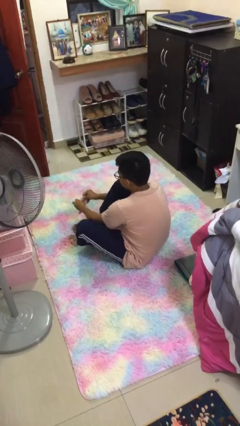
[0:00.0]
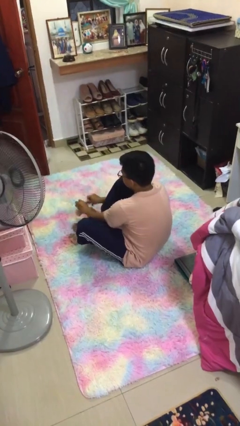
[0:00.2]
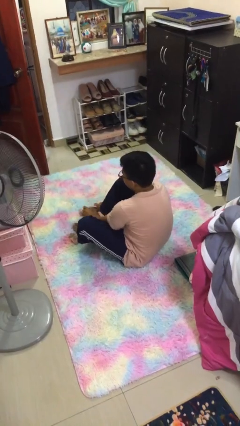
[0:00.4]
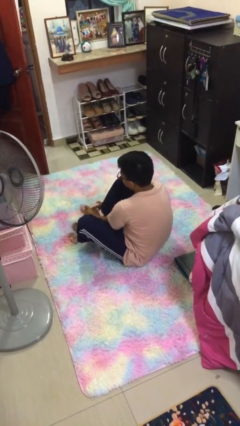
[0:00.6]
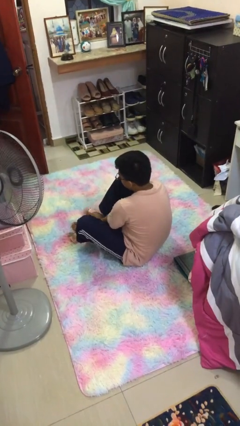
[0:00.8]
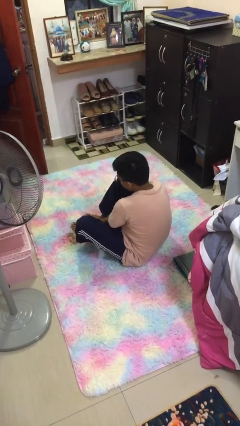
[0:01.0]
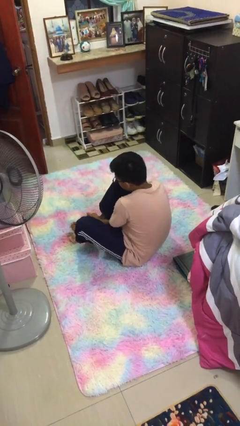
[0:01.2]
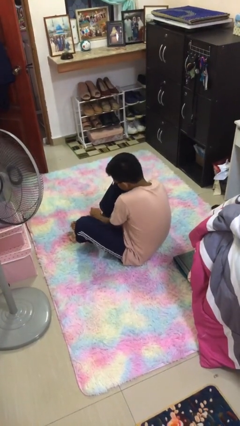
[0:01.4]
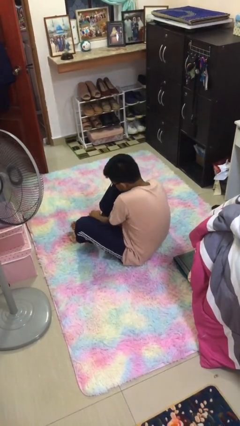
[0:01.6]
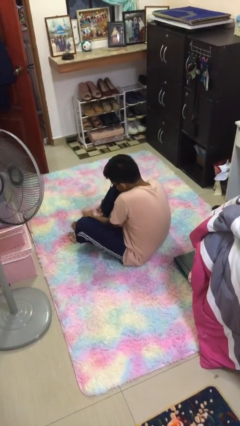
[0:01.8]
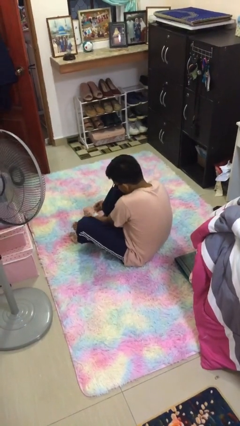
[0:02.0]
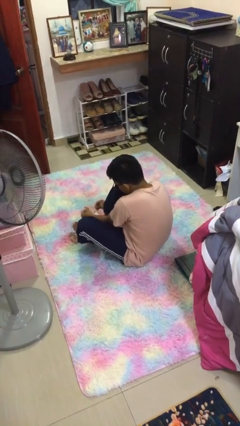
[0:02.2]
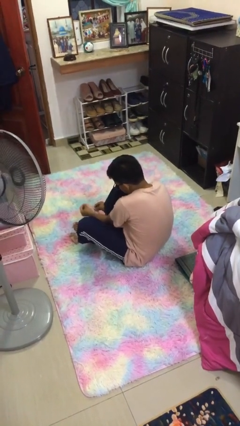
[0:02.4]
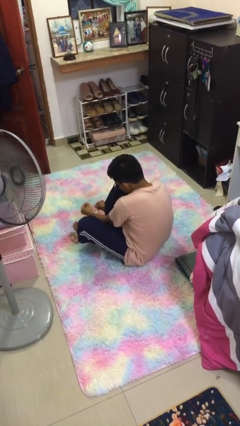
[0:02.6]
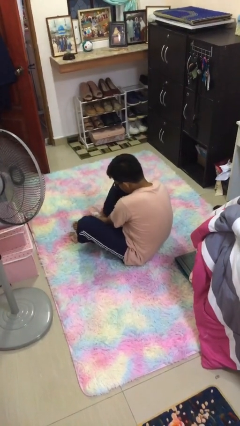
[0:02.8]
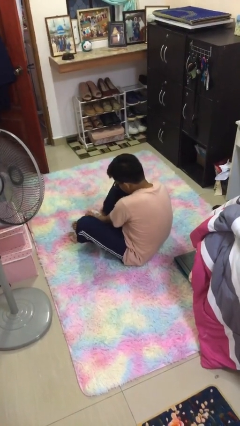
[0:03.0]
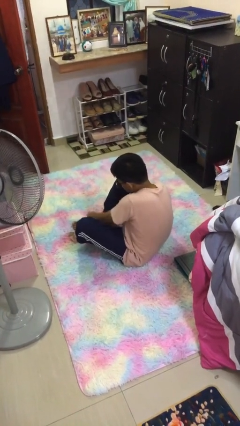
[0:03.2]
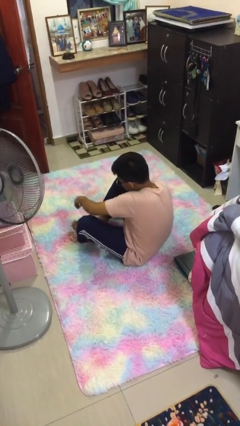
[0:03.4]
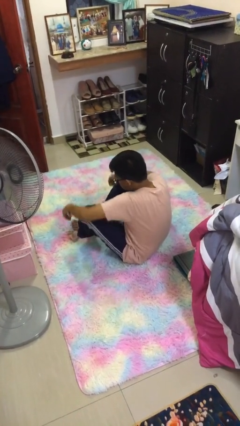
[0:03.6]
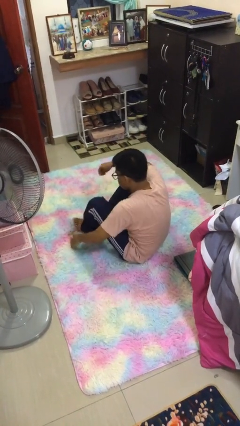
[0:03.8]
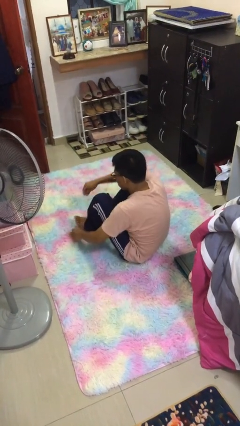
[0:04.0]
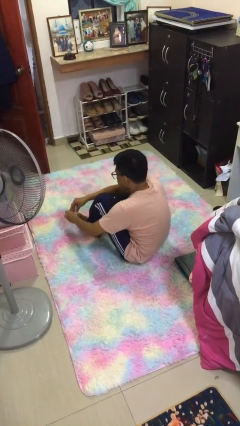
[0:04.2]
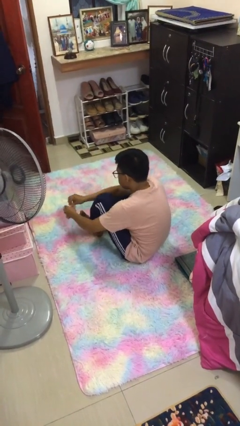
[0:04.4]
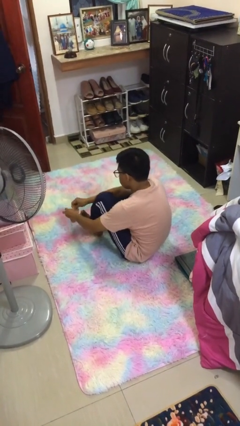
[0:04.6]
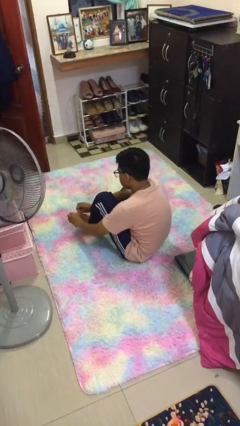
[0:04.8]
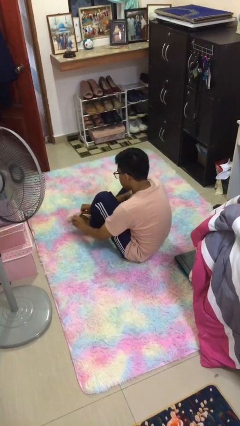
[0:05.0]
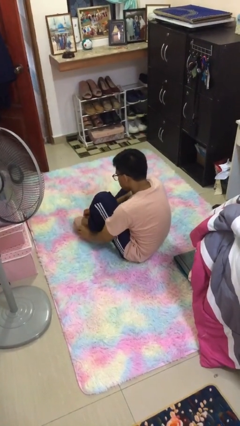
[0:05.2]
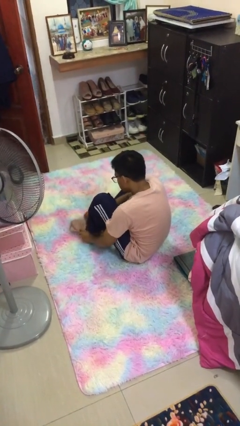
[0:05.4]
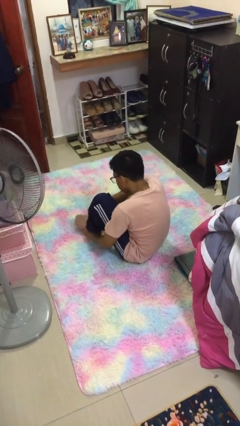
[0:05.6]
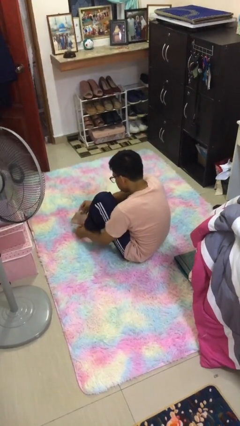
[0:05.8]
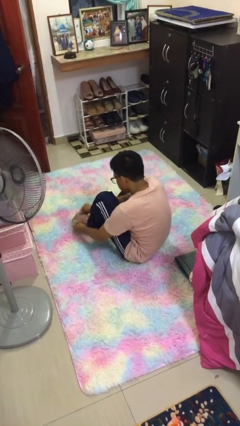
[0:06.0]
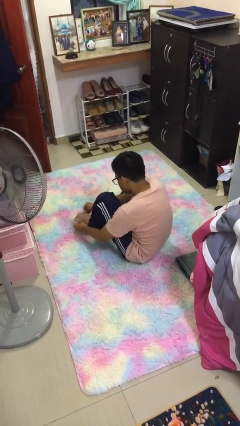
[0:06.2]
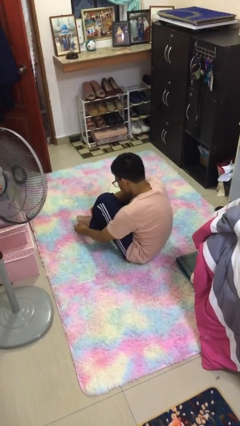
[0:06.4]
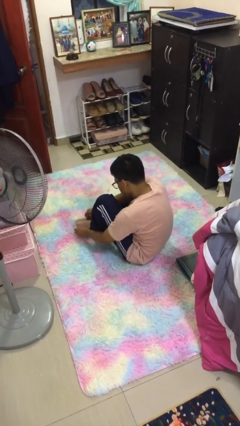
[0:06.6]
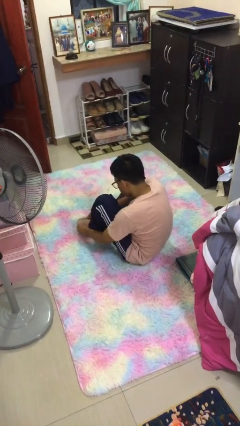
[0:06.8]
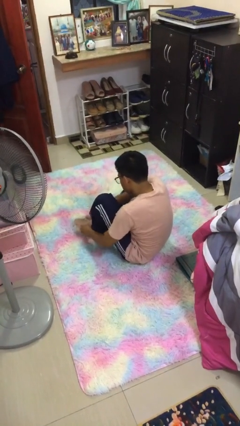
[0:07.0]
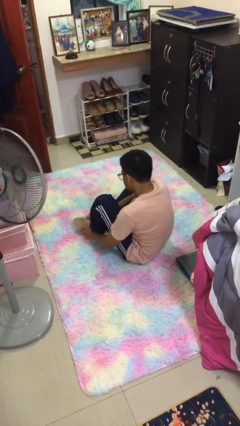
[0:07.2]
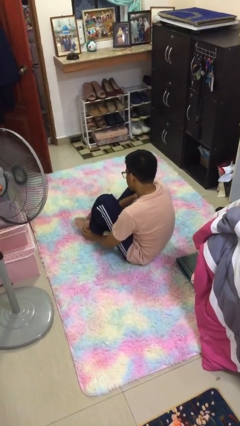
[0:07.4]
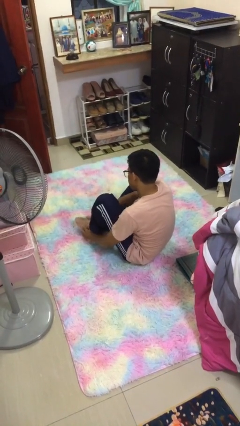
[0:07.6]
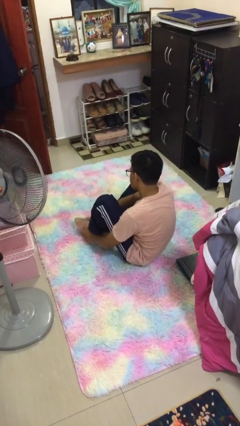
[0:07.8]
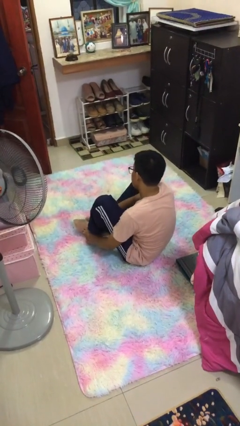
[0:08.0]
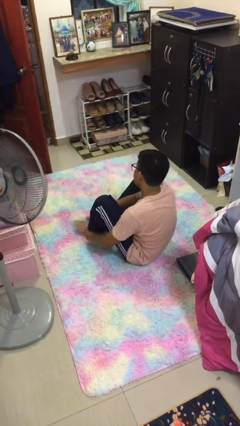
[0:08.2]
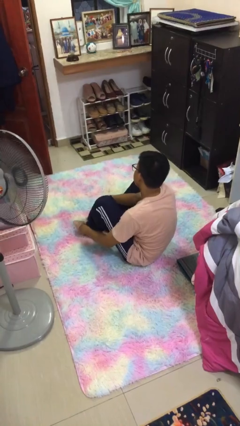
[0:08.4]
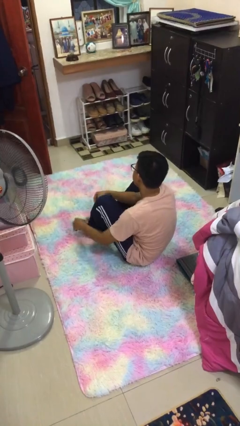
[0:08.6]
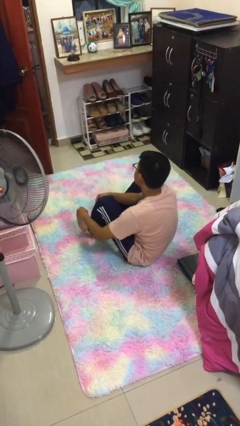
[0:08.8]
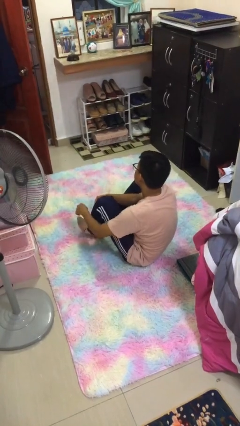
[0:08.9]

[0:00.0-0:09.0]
person puts on socks

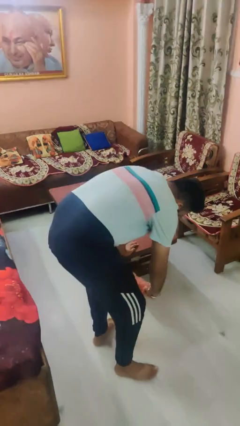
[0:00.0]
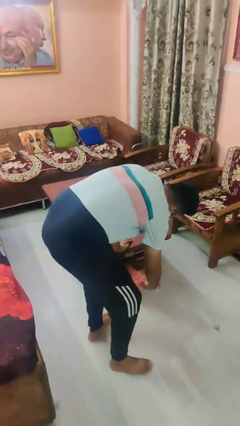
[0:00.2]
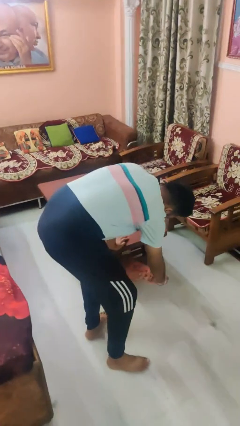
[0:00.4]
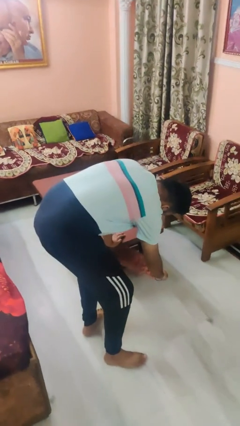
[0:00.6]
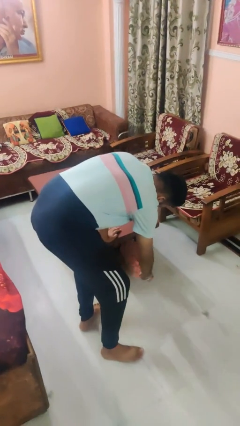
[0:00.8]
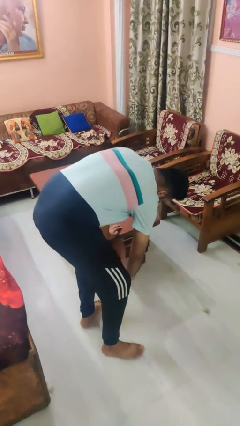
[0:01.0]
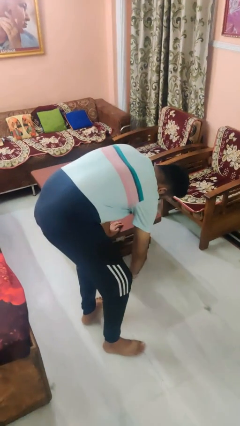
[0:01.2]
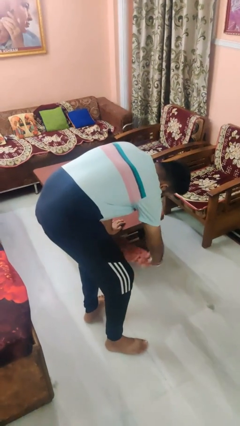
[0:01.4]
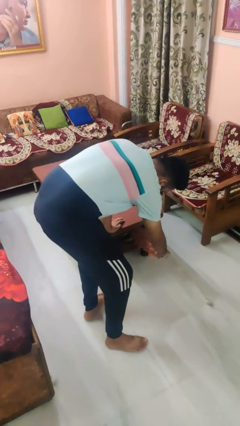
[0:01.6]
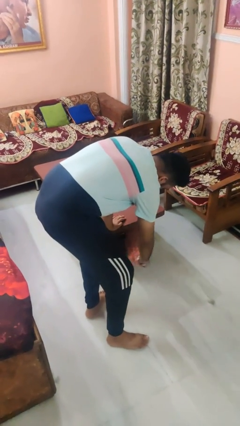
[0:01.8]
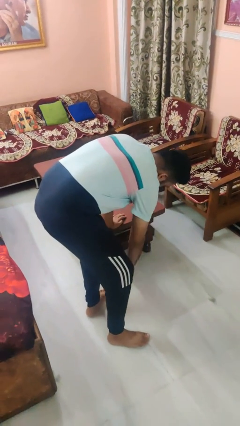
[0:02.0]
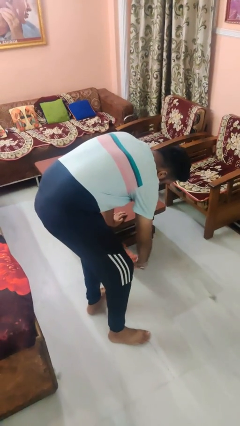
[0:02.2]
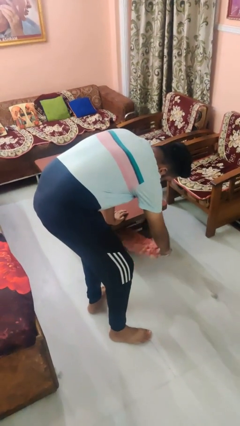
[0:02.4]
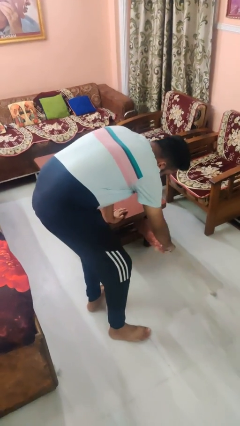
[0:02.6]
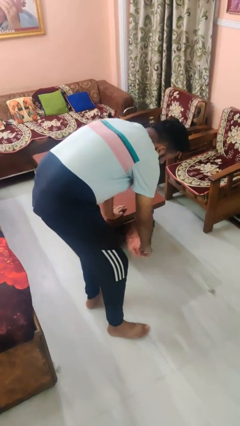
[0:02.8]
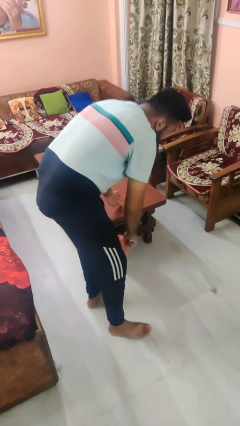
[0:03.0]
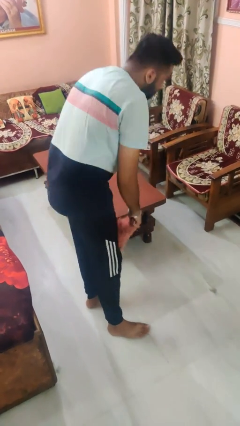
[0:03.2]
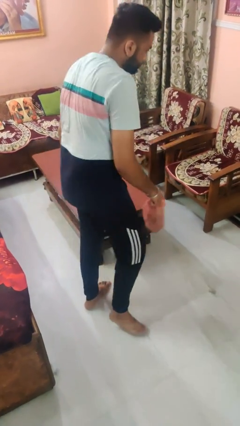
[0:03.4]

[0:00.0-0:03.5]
person dusts furniture

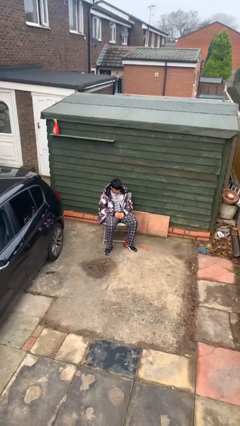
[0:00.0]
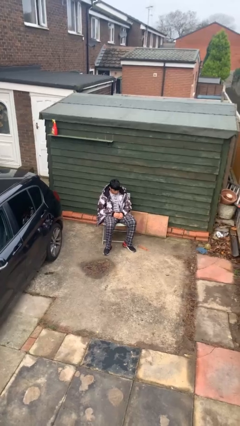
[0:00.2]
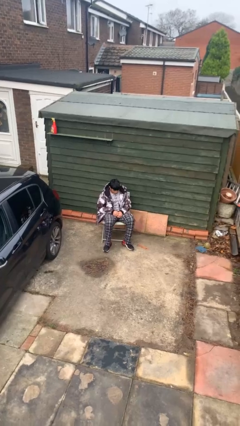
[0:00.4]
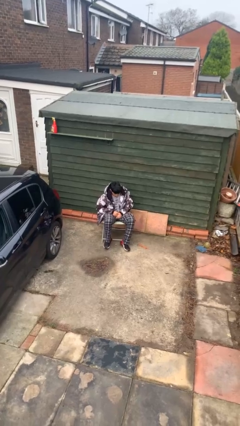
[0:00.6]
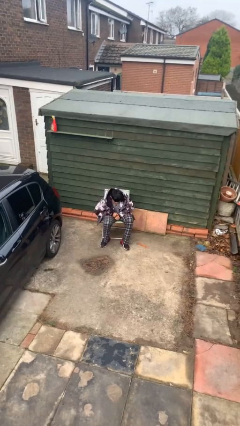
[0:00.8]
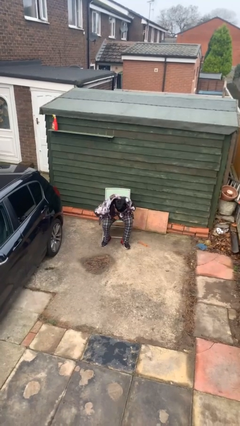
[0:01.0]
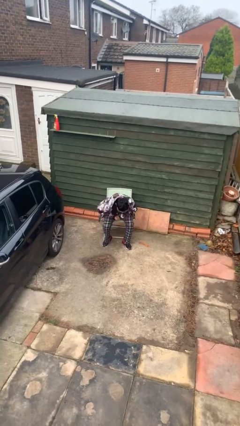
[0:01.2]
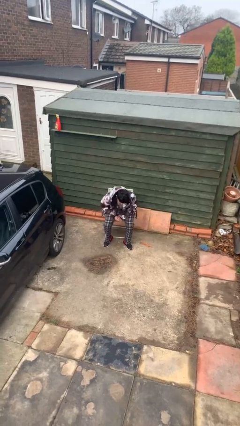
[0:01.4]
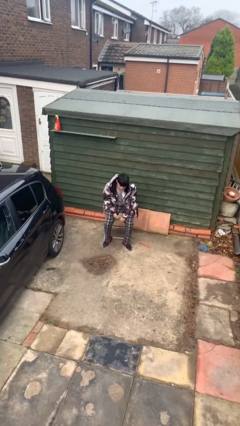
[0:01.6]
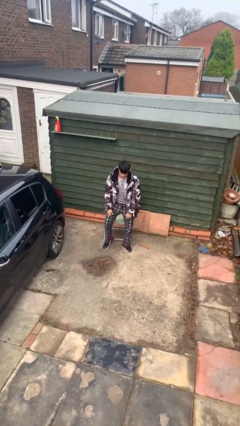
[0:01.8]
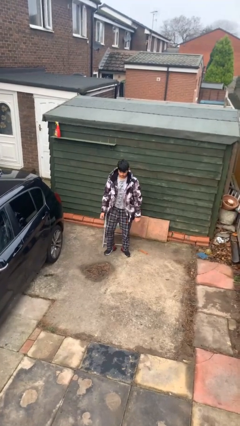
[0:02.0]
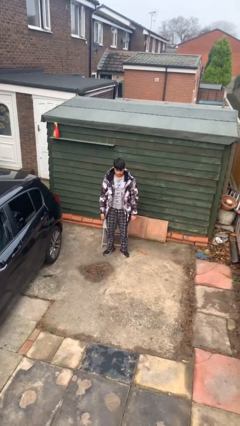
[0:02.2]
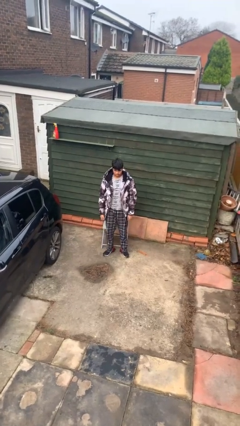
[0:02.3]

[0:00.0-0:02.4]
person stands up

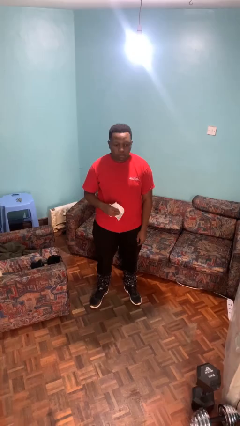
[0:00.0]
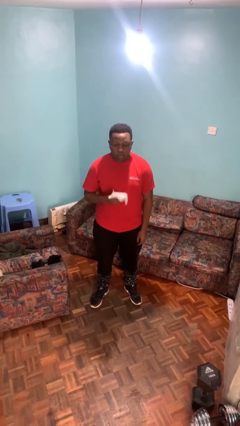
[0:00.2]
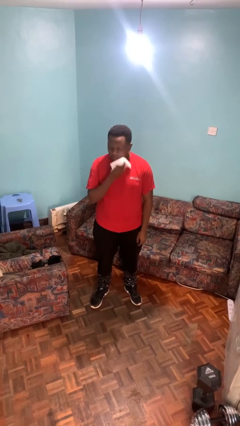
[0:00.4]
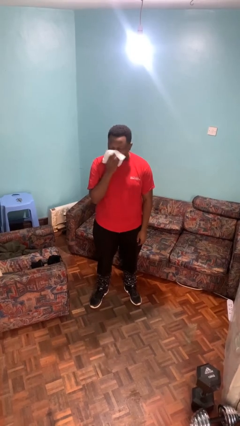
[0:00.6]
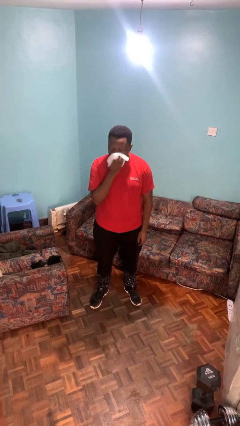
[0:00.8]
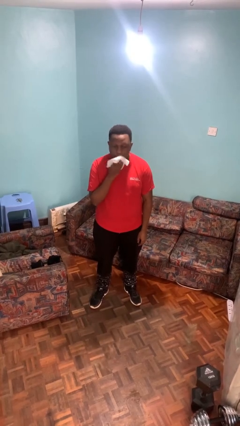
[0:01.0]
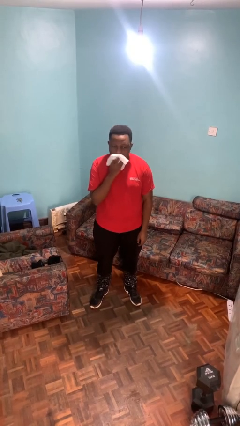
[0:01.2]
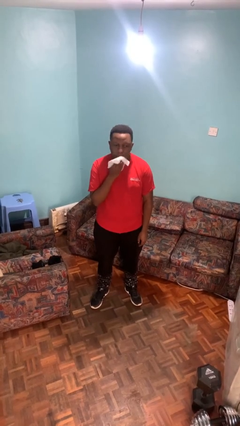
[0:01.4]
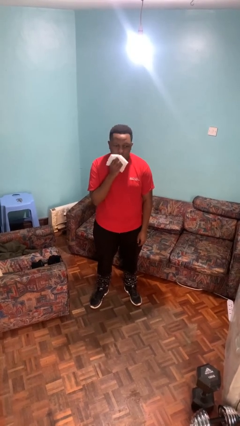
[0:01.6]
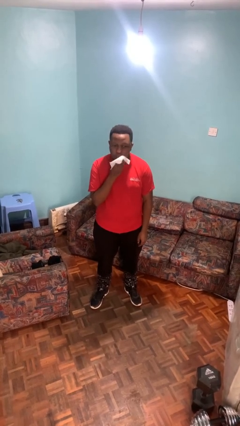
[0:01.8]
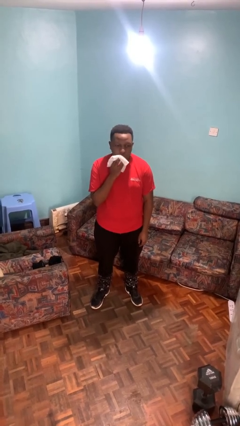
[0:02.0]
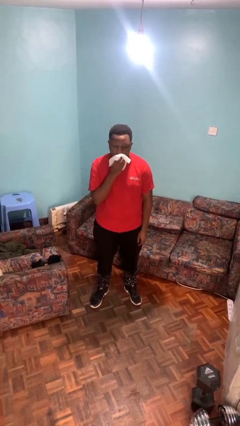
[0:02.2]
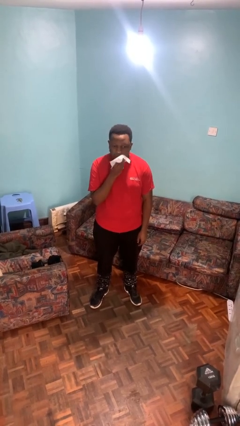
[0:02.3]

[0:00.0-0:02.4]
person wipes mouth with napkin

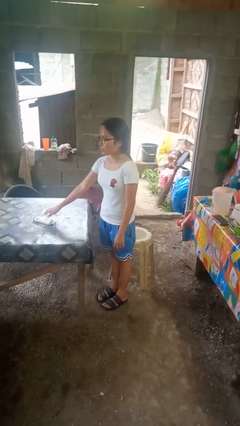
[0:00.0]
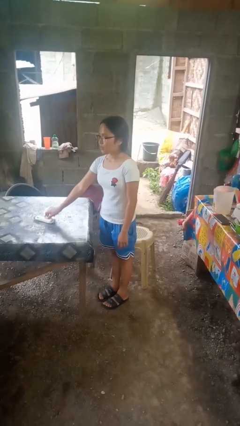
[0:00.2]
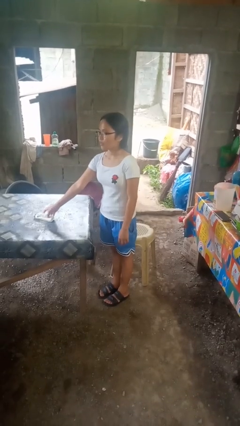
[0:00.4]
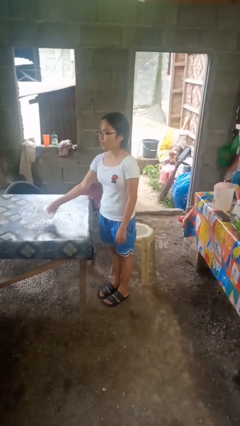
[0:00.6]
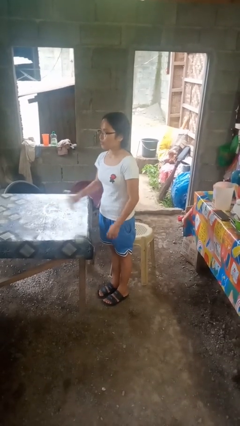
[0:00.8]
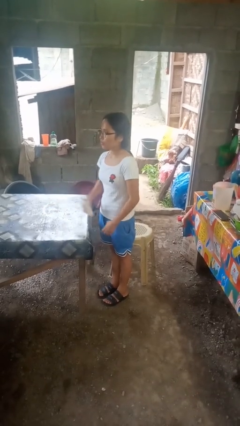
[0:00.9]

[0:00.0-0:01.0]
person picks up object from table
